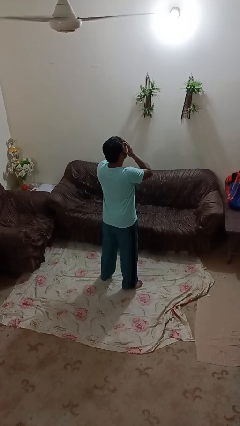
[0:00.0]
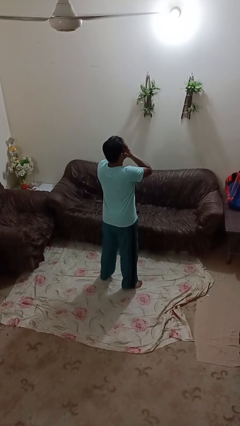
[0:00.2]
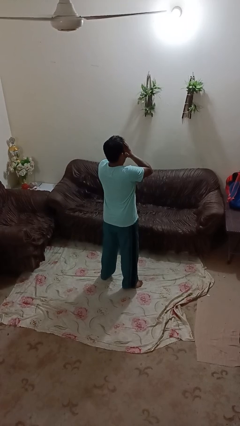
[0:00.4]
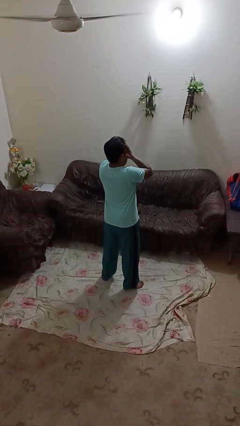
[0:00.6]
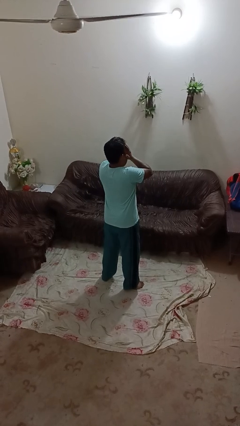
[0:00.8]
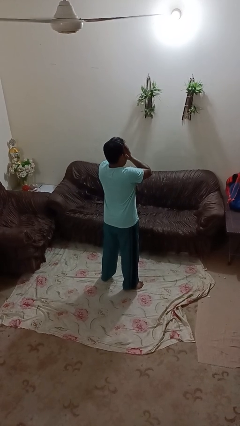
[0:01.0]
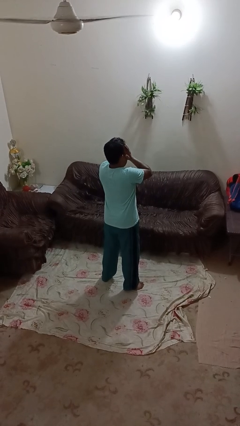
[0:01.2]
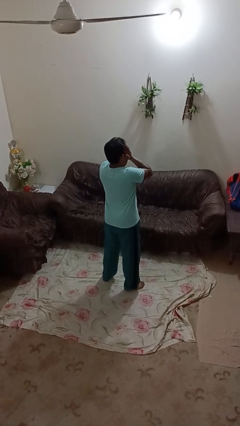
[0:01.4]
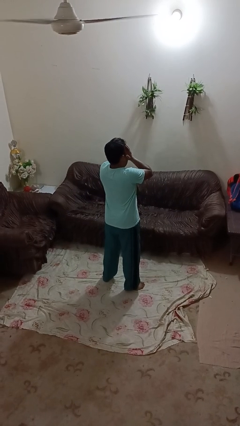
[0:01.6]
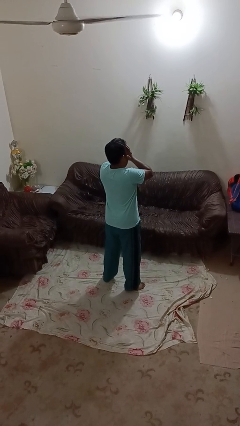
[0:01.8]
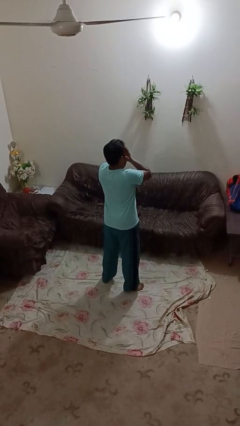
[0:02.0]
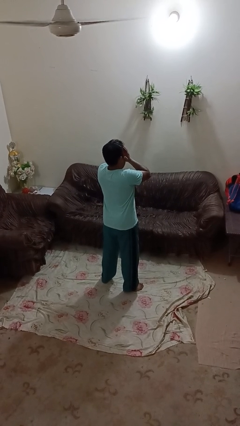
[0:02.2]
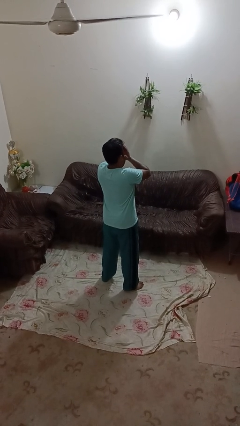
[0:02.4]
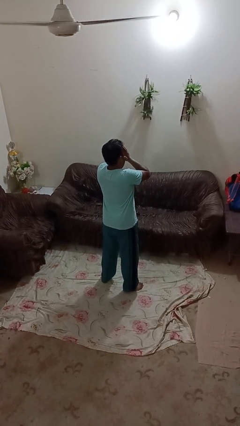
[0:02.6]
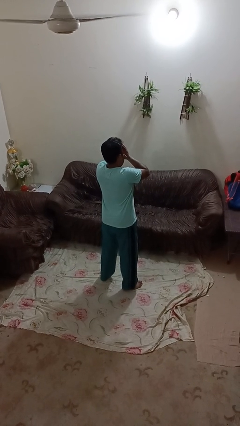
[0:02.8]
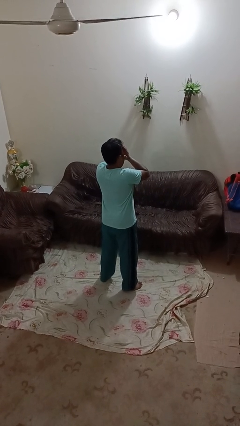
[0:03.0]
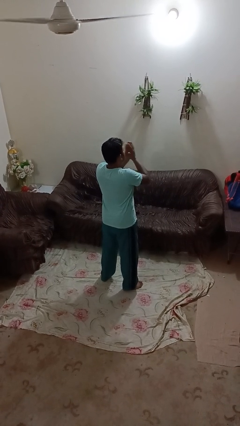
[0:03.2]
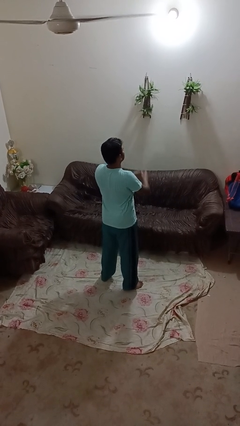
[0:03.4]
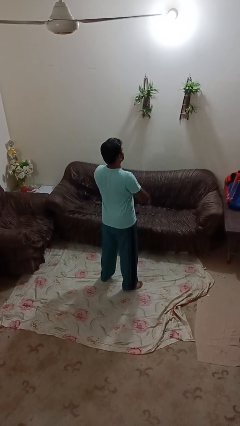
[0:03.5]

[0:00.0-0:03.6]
person covers face with hands

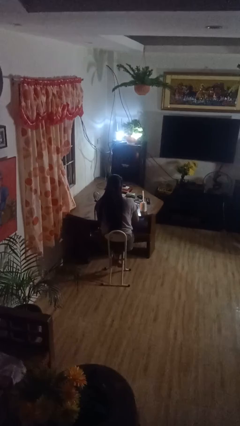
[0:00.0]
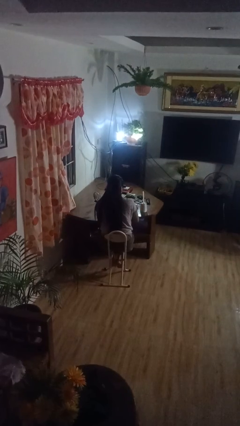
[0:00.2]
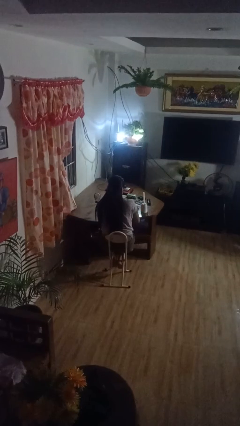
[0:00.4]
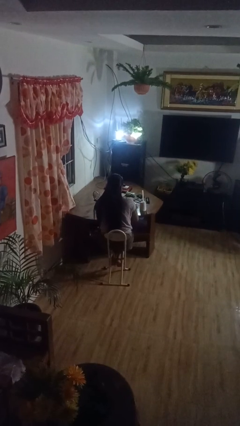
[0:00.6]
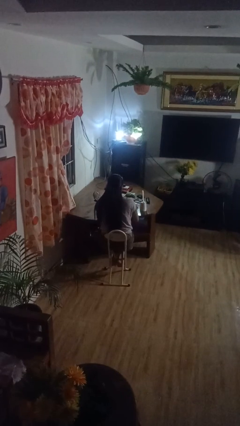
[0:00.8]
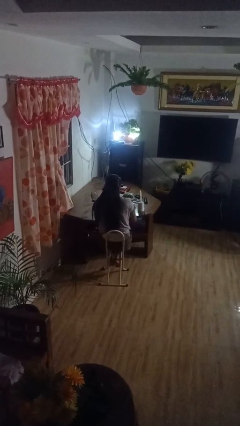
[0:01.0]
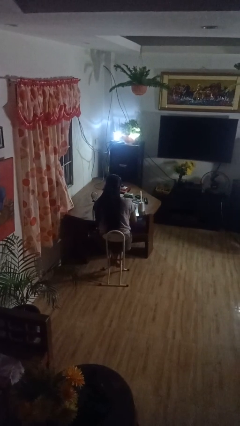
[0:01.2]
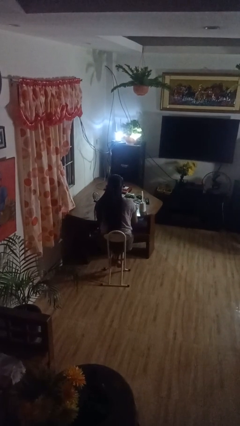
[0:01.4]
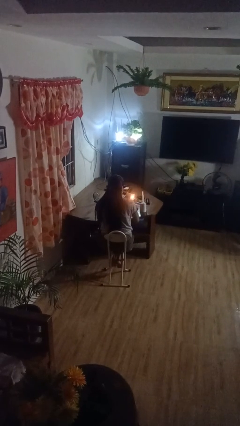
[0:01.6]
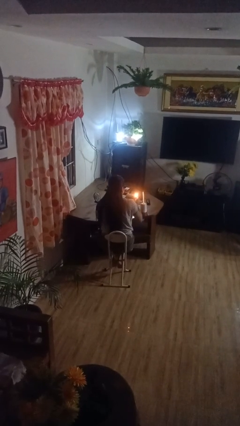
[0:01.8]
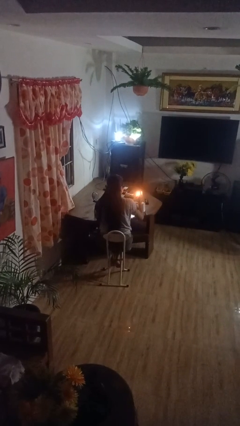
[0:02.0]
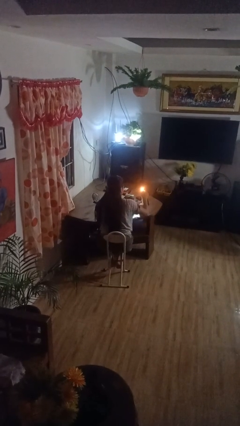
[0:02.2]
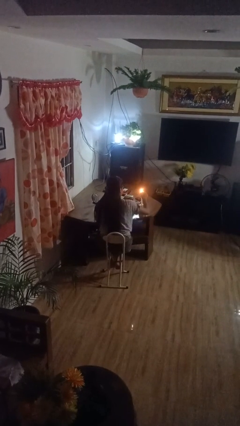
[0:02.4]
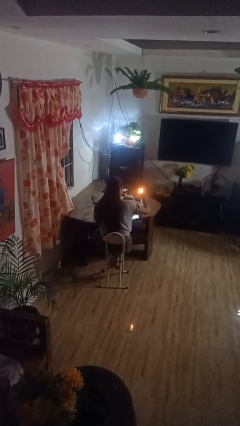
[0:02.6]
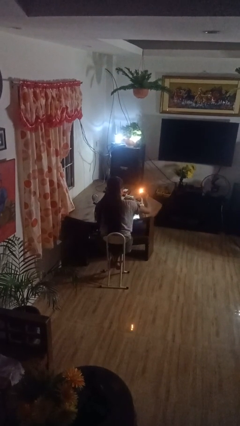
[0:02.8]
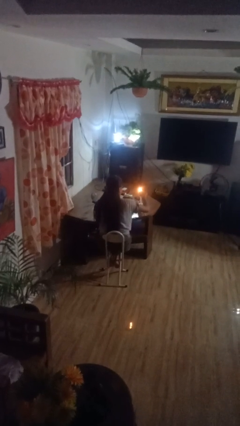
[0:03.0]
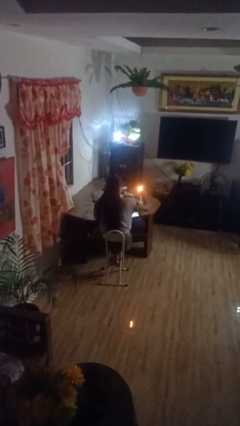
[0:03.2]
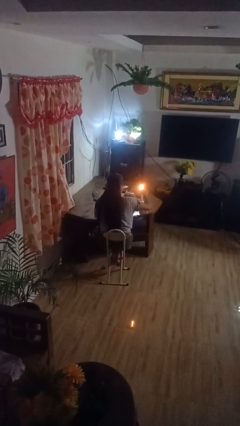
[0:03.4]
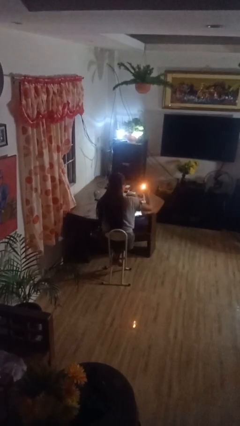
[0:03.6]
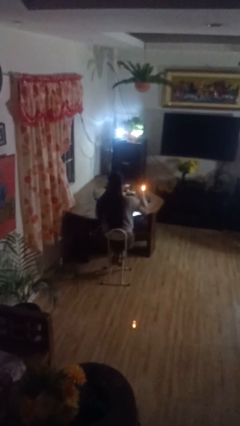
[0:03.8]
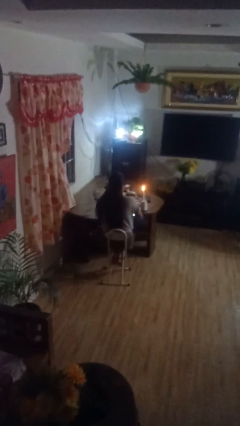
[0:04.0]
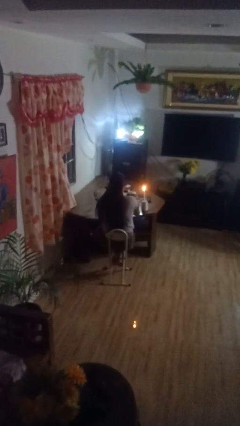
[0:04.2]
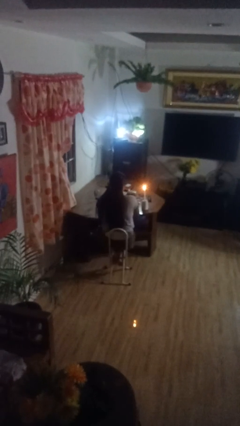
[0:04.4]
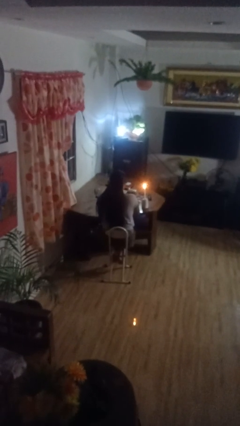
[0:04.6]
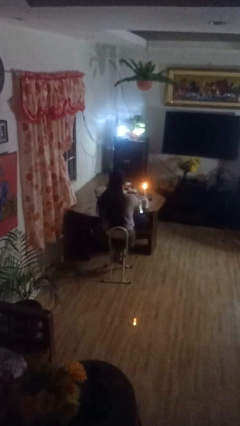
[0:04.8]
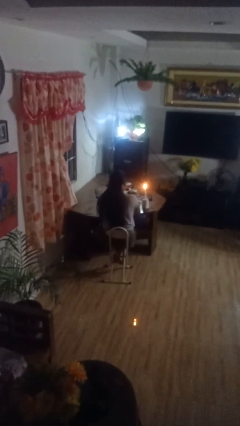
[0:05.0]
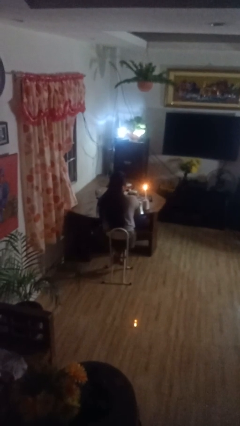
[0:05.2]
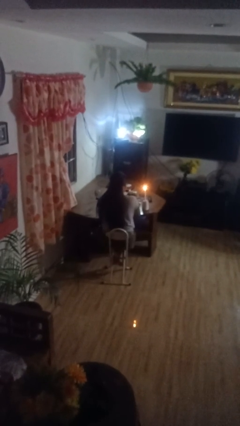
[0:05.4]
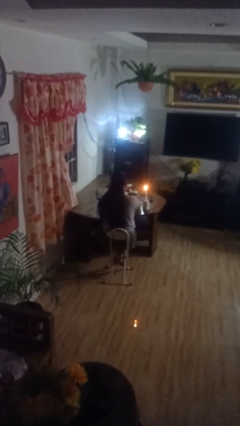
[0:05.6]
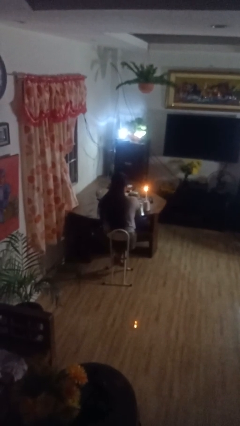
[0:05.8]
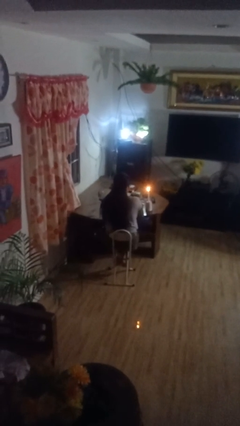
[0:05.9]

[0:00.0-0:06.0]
person lights candle

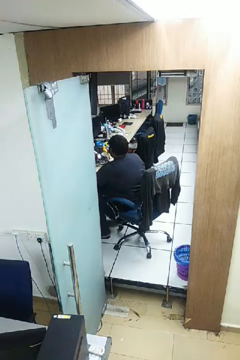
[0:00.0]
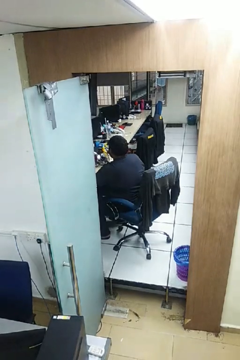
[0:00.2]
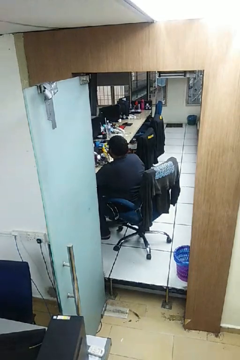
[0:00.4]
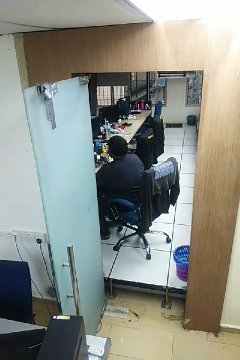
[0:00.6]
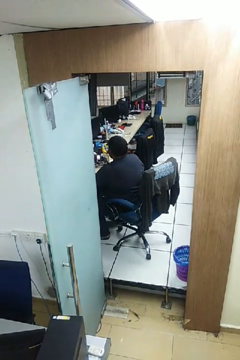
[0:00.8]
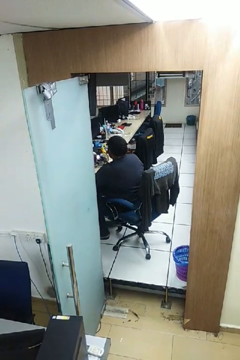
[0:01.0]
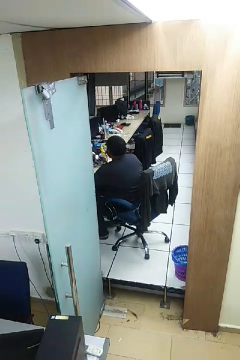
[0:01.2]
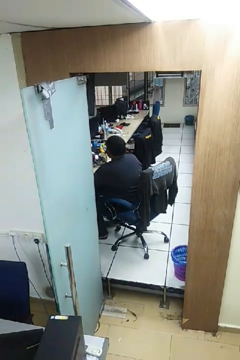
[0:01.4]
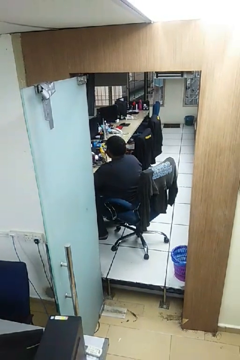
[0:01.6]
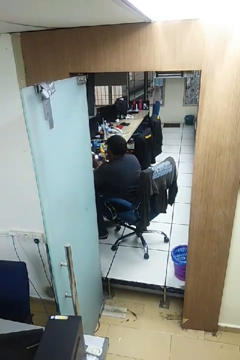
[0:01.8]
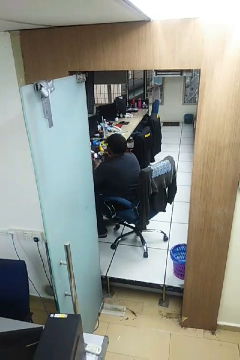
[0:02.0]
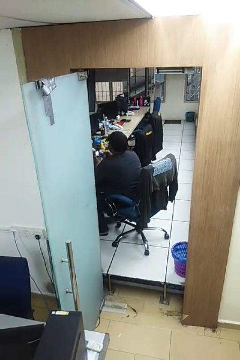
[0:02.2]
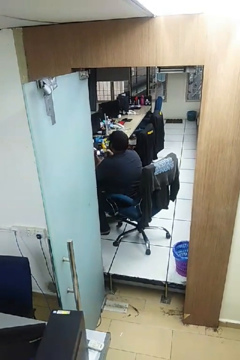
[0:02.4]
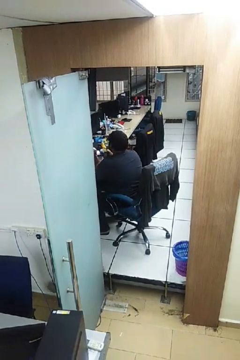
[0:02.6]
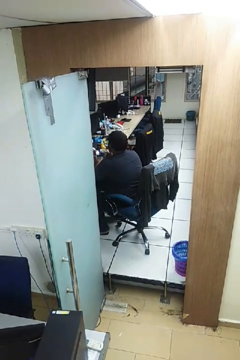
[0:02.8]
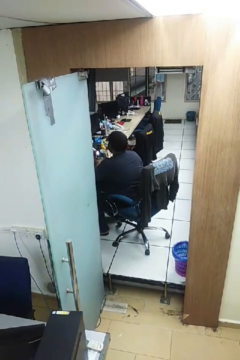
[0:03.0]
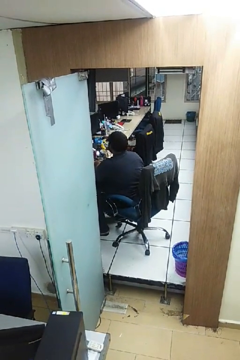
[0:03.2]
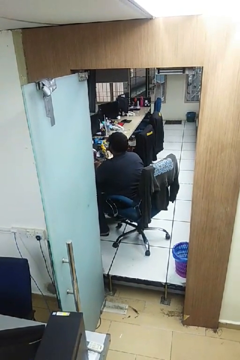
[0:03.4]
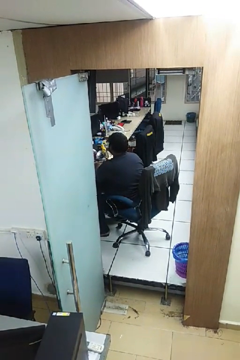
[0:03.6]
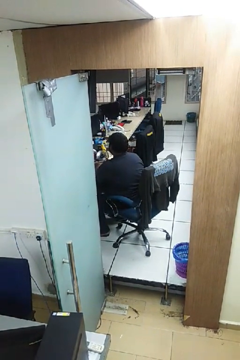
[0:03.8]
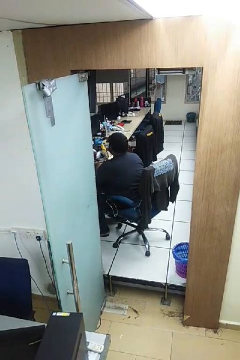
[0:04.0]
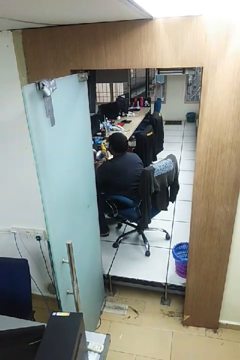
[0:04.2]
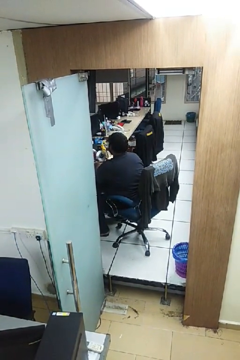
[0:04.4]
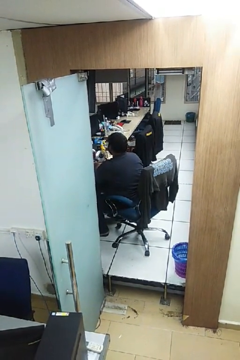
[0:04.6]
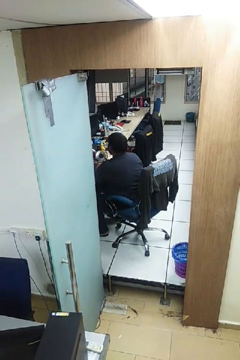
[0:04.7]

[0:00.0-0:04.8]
person turns on fan

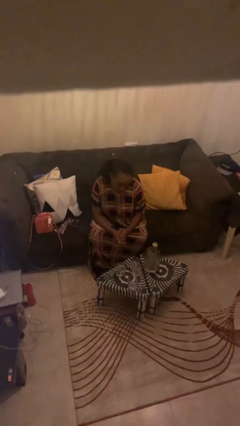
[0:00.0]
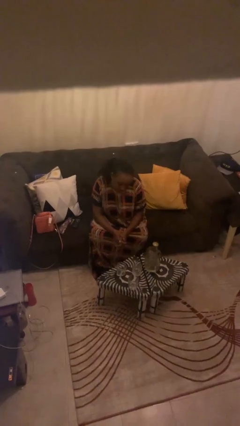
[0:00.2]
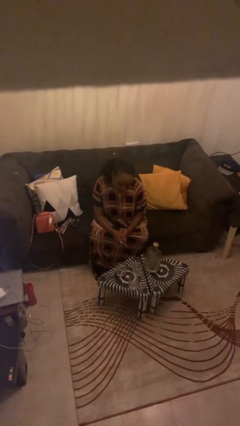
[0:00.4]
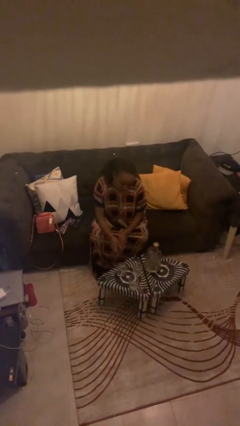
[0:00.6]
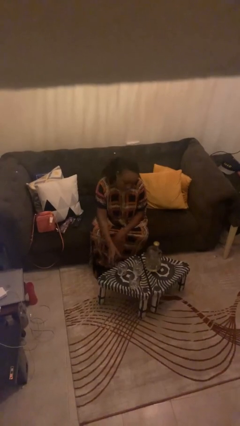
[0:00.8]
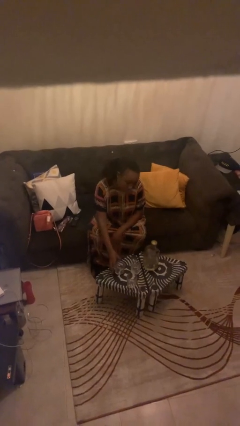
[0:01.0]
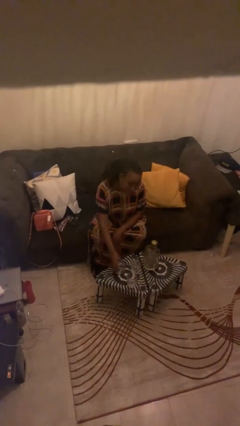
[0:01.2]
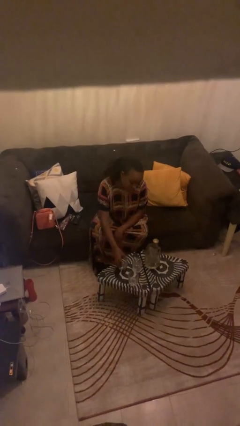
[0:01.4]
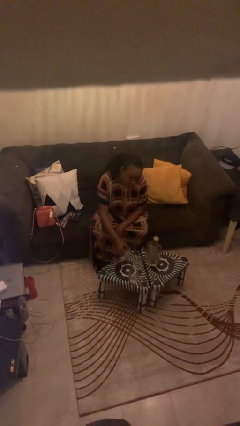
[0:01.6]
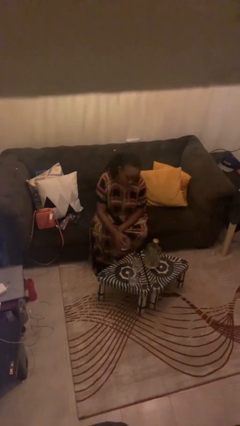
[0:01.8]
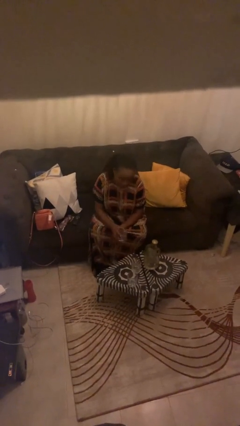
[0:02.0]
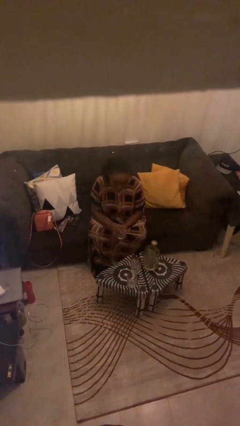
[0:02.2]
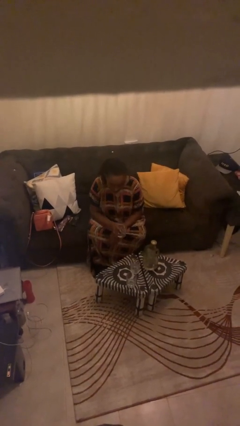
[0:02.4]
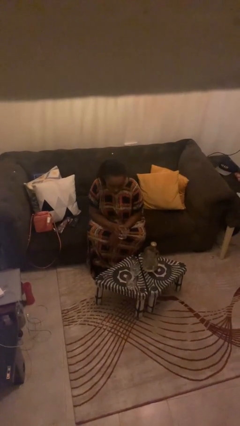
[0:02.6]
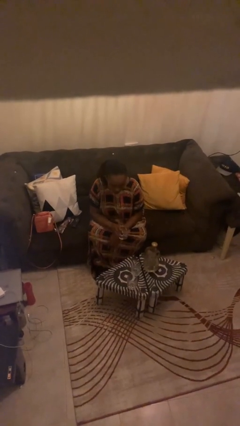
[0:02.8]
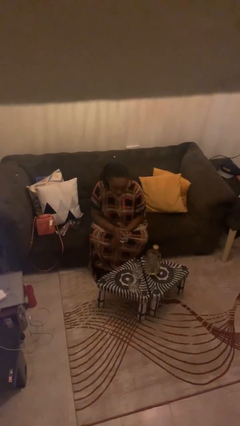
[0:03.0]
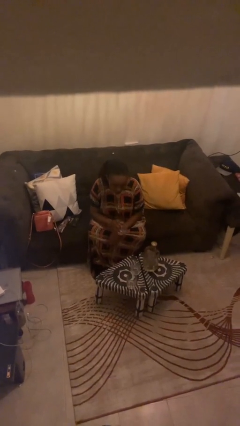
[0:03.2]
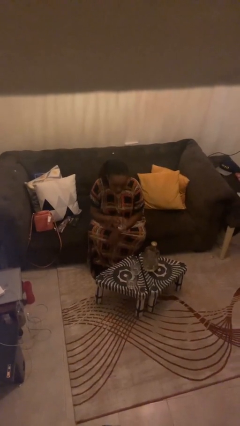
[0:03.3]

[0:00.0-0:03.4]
person picks up object from table

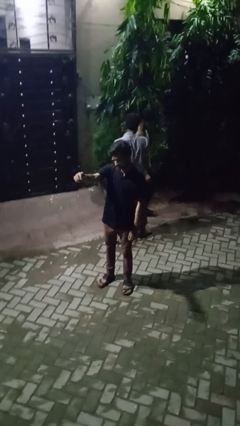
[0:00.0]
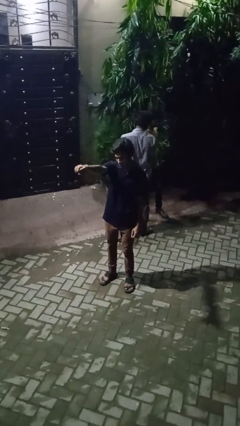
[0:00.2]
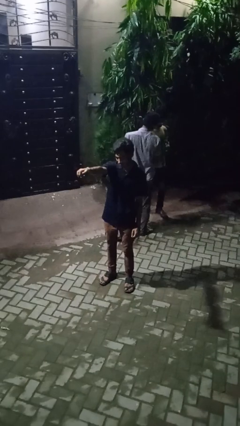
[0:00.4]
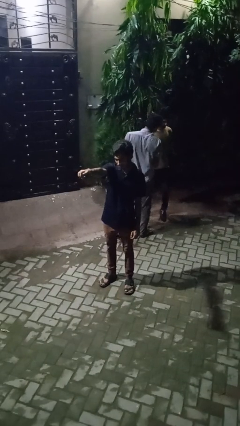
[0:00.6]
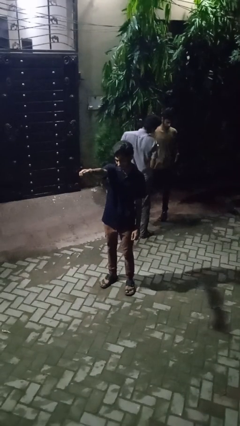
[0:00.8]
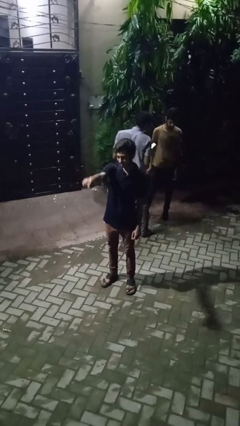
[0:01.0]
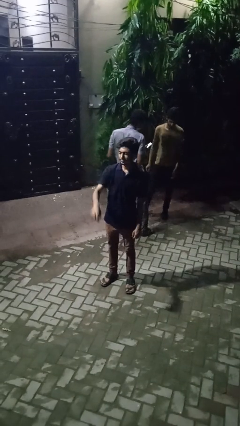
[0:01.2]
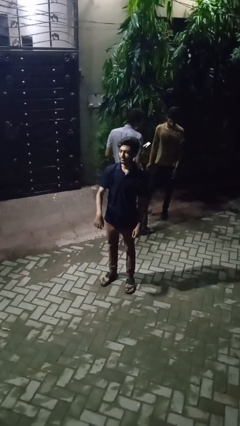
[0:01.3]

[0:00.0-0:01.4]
person points at person
